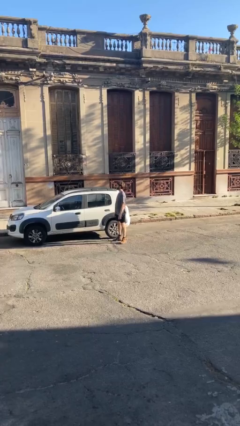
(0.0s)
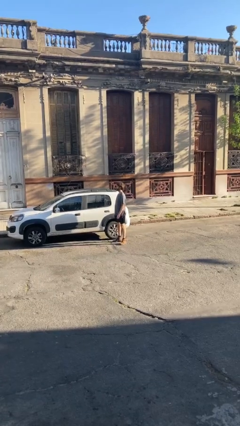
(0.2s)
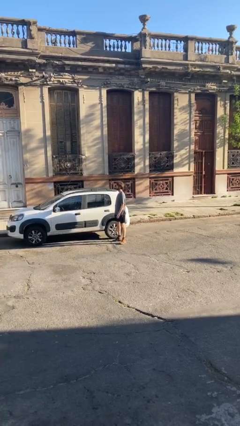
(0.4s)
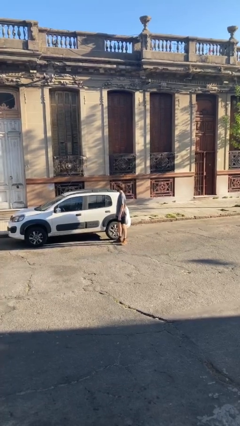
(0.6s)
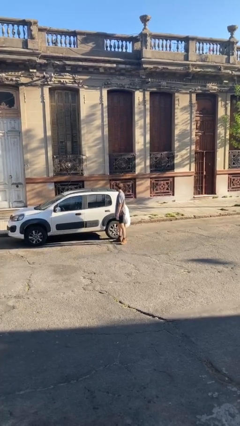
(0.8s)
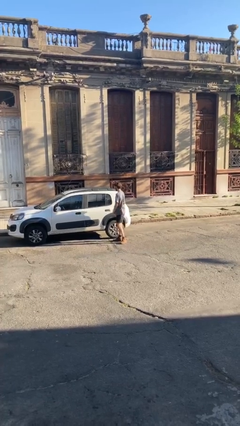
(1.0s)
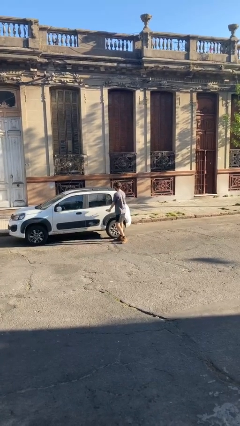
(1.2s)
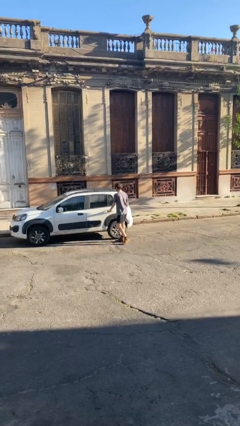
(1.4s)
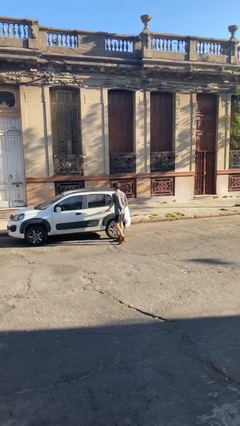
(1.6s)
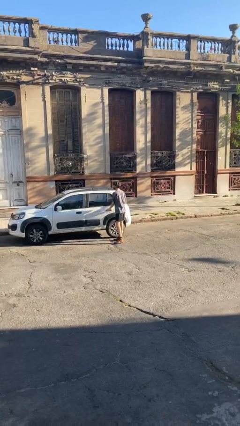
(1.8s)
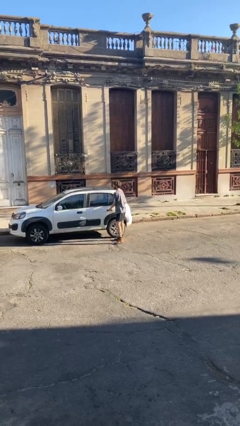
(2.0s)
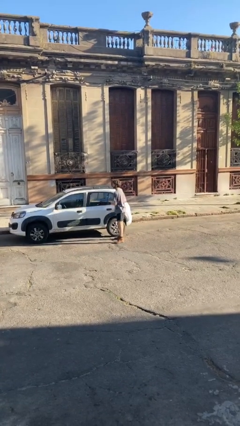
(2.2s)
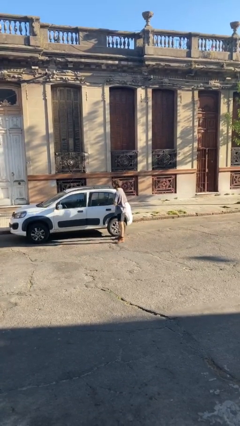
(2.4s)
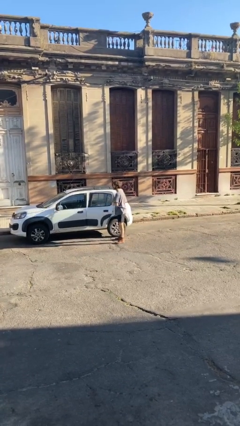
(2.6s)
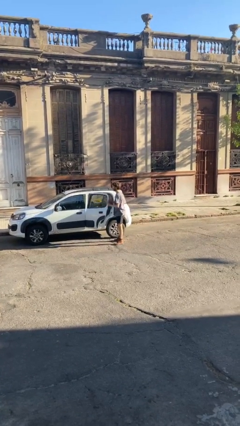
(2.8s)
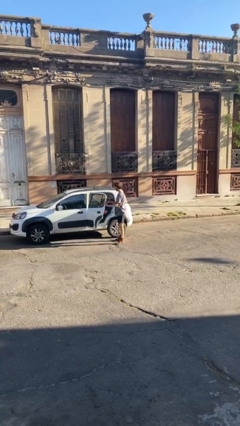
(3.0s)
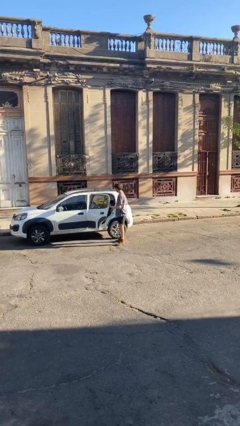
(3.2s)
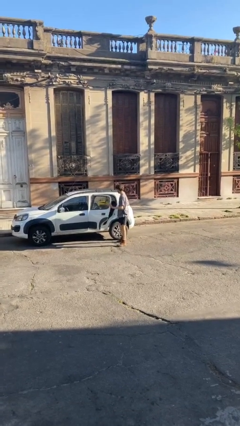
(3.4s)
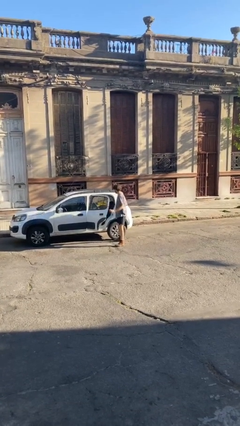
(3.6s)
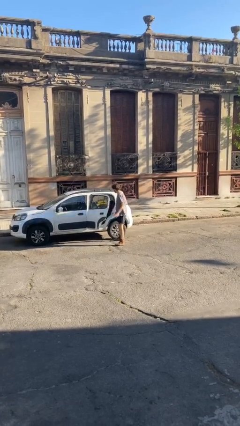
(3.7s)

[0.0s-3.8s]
person opens car door

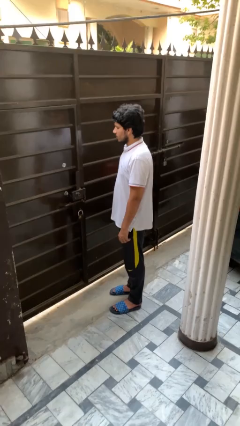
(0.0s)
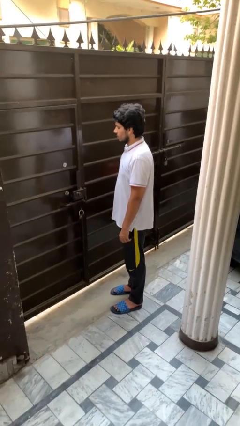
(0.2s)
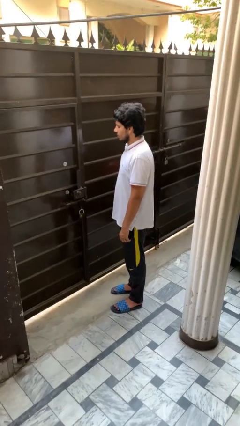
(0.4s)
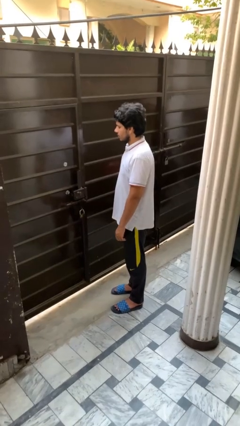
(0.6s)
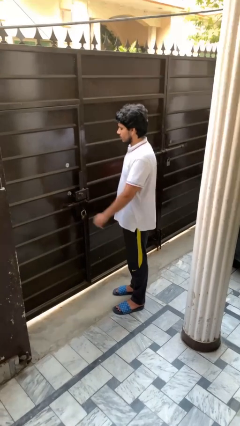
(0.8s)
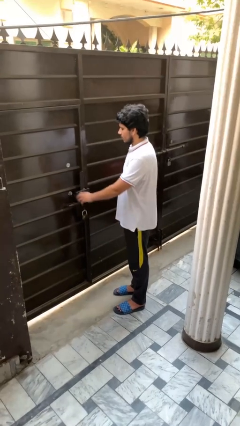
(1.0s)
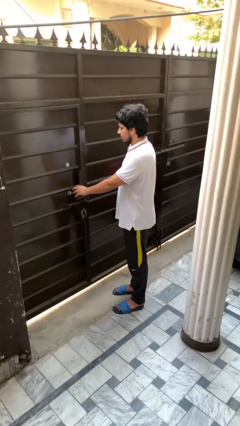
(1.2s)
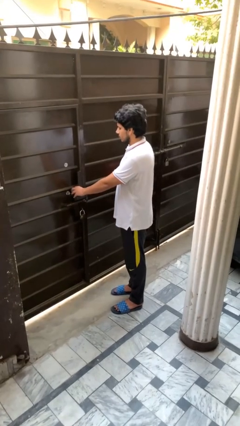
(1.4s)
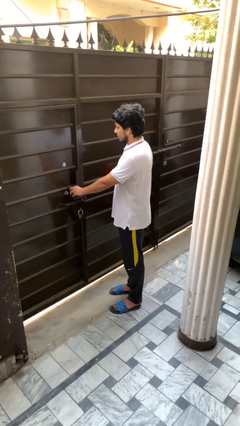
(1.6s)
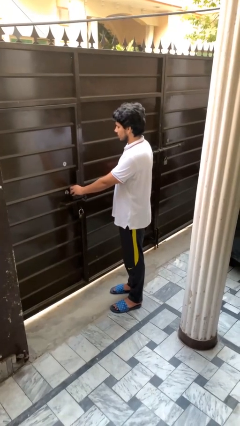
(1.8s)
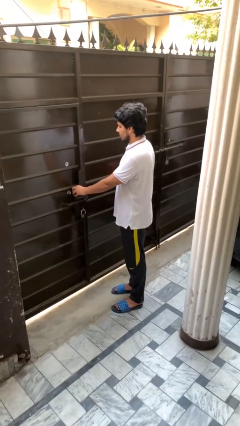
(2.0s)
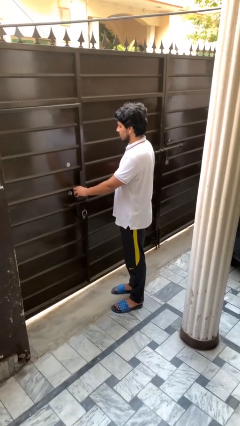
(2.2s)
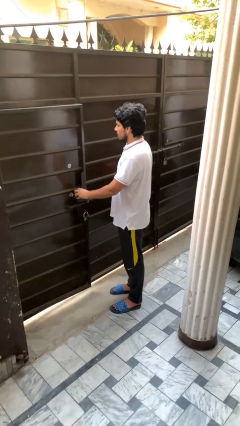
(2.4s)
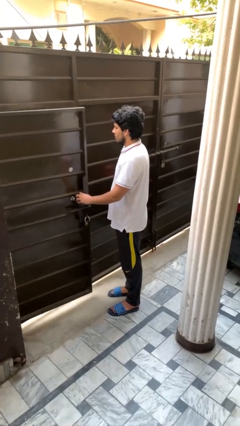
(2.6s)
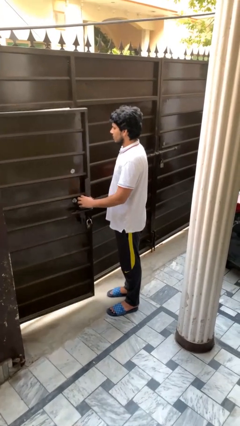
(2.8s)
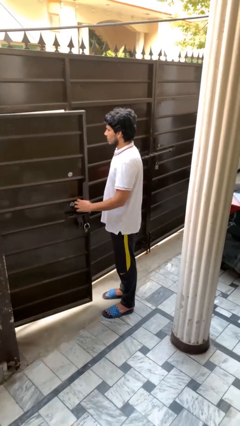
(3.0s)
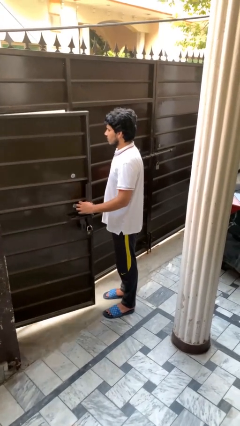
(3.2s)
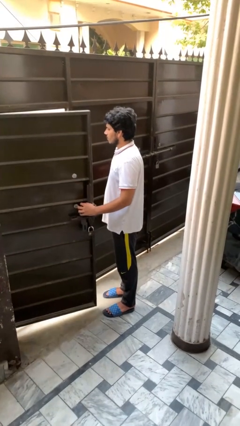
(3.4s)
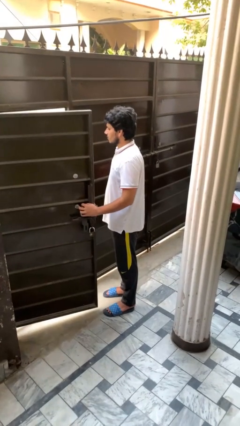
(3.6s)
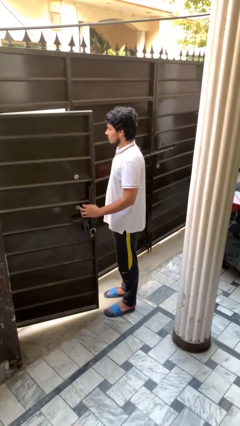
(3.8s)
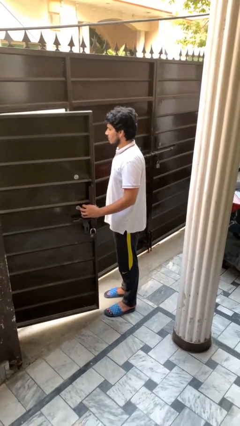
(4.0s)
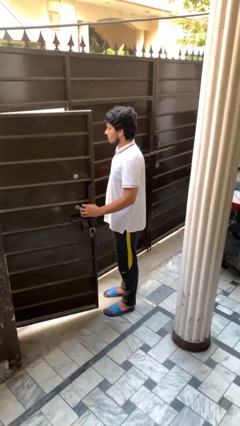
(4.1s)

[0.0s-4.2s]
person opens gate

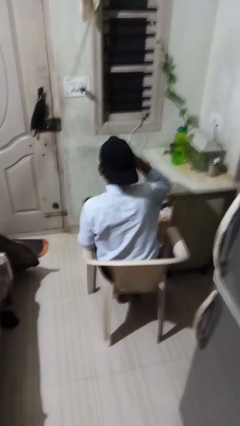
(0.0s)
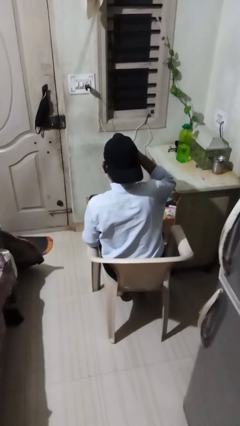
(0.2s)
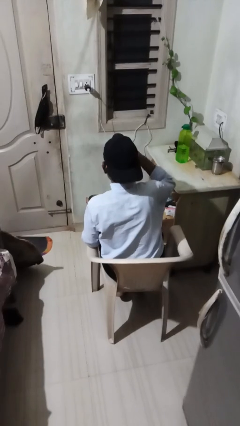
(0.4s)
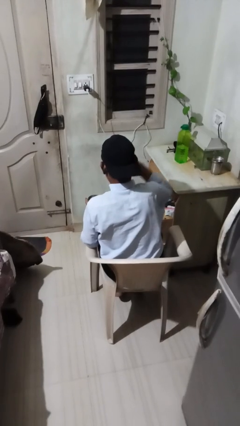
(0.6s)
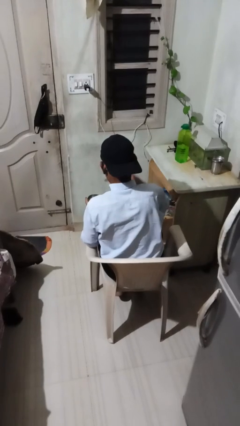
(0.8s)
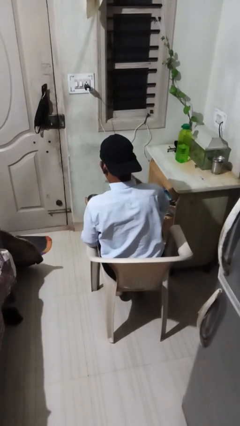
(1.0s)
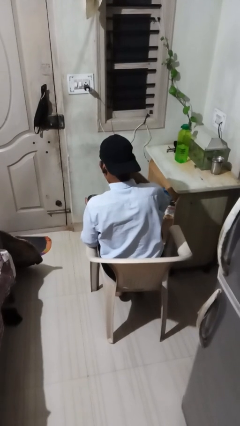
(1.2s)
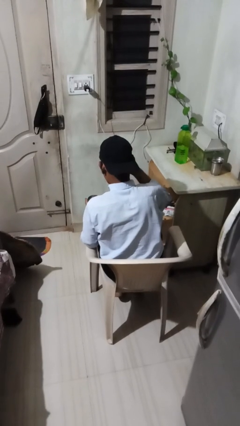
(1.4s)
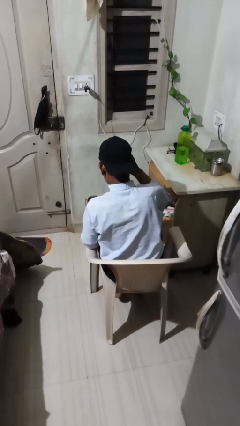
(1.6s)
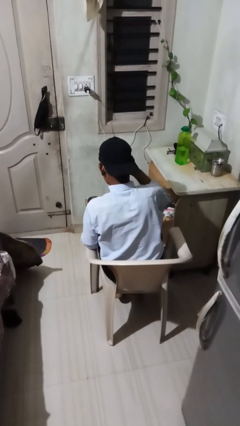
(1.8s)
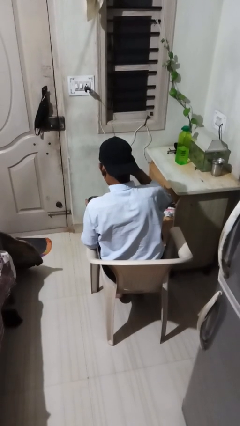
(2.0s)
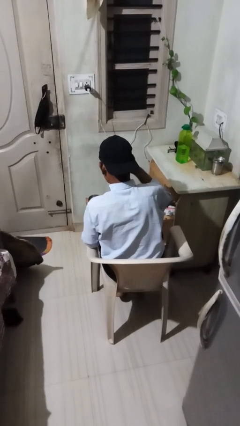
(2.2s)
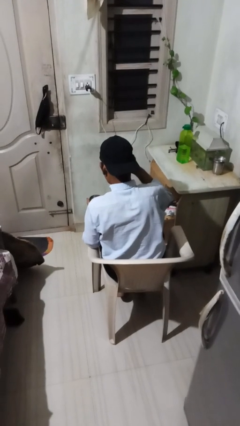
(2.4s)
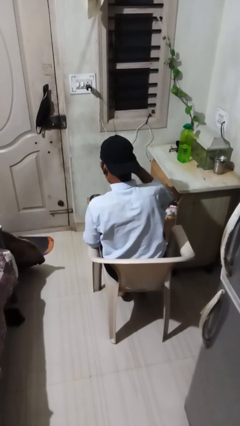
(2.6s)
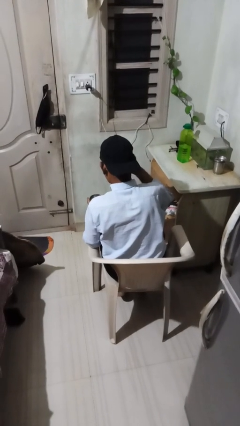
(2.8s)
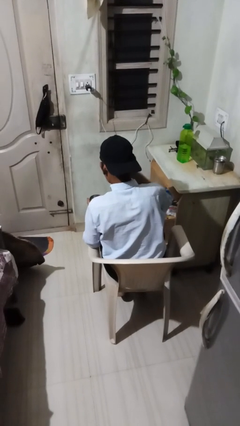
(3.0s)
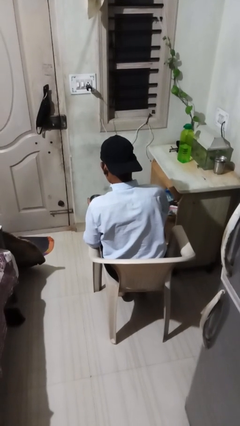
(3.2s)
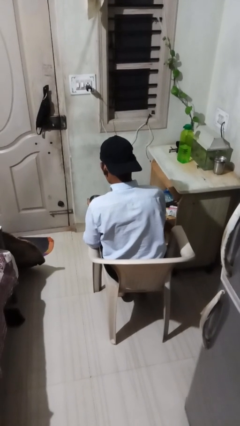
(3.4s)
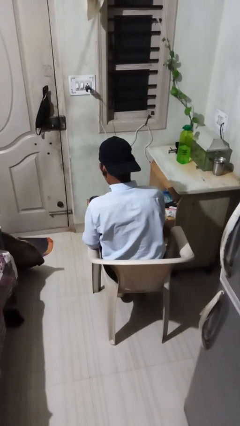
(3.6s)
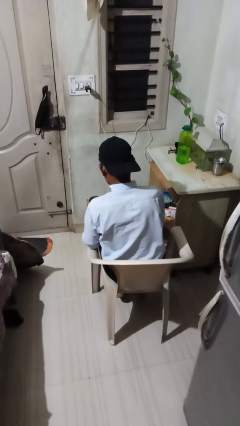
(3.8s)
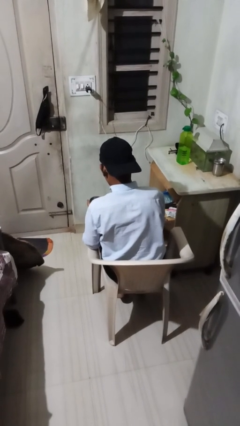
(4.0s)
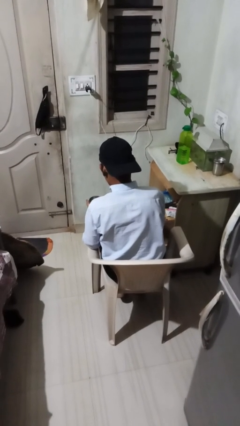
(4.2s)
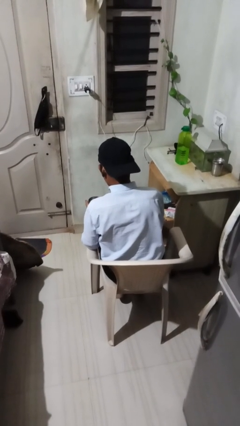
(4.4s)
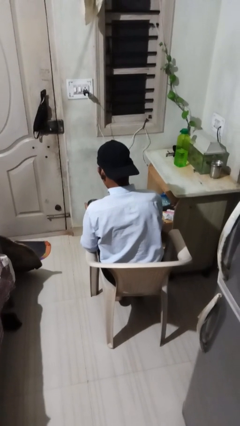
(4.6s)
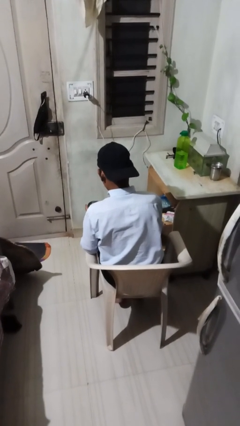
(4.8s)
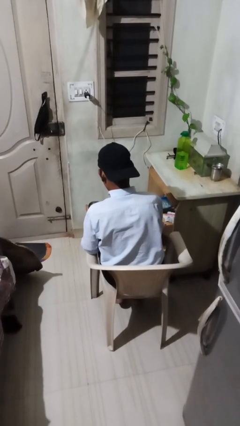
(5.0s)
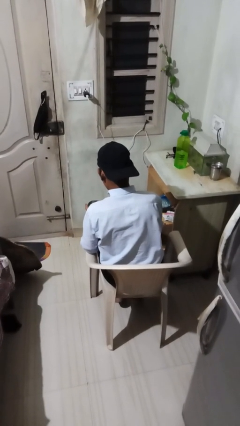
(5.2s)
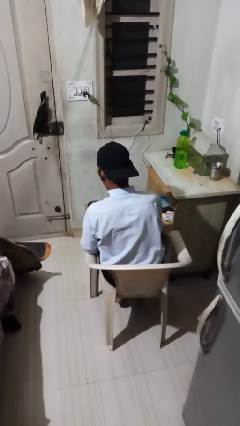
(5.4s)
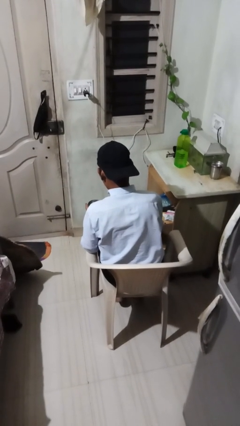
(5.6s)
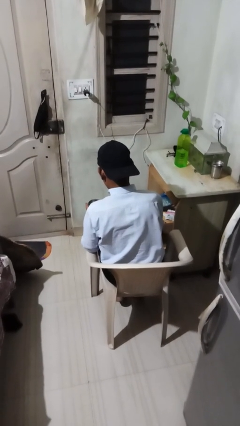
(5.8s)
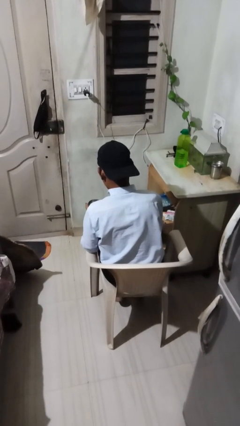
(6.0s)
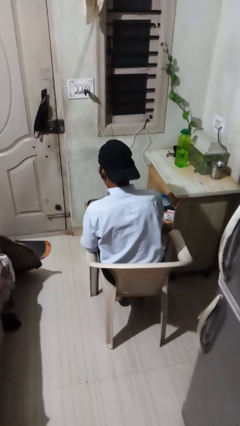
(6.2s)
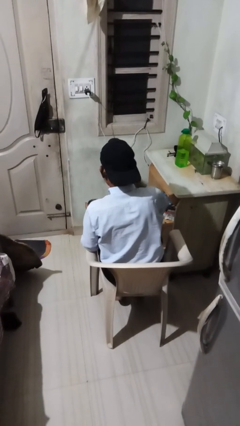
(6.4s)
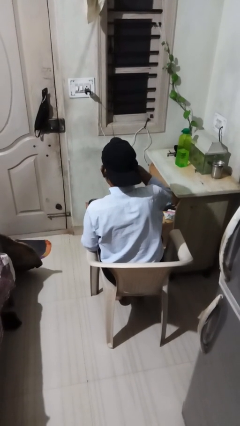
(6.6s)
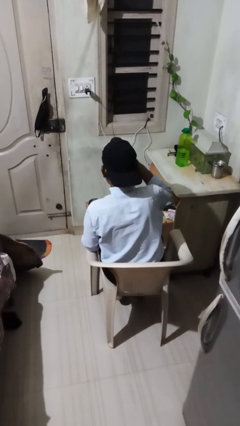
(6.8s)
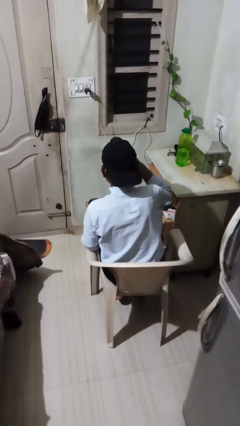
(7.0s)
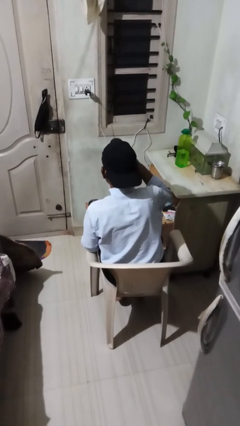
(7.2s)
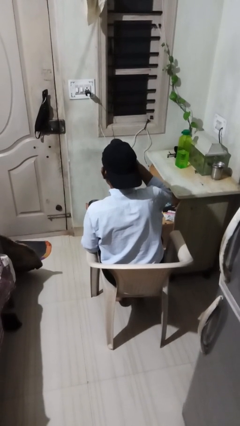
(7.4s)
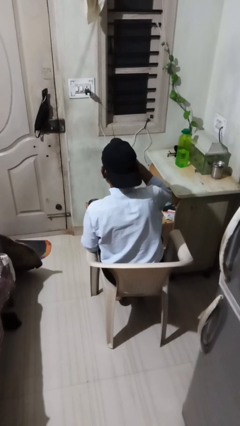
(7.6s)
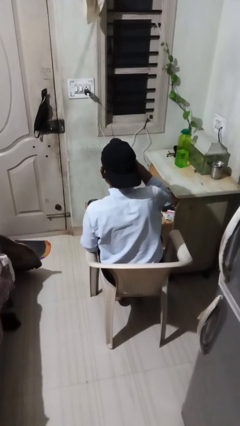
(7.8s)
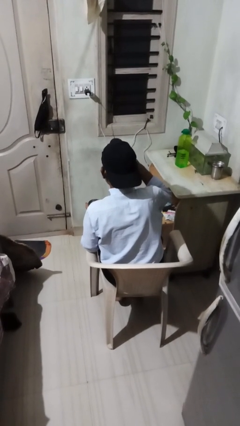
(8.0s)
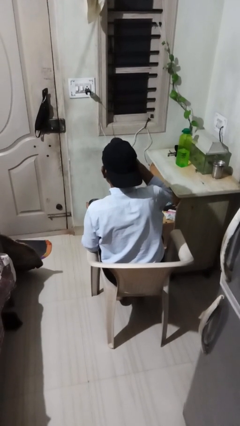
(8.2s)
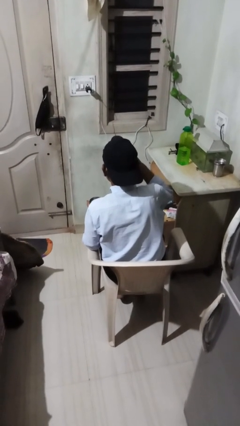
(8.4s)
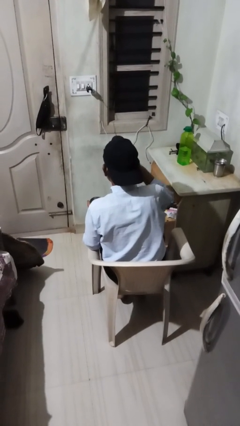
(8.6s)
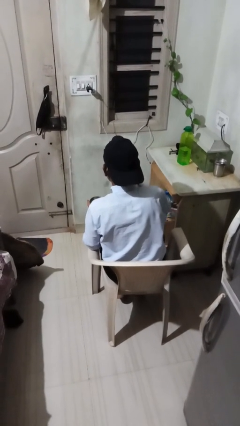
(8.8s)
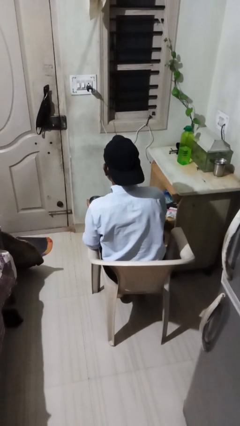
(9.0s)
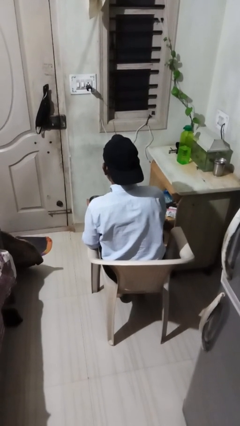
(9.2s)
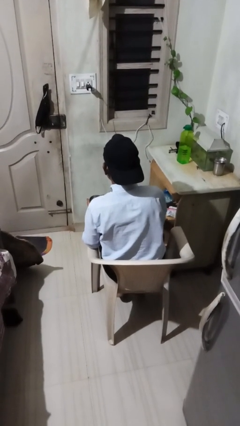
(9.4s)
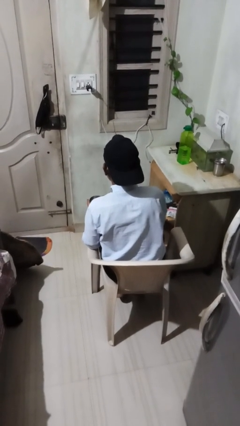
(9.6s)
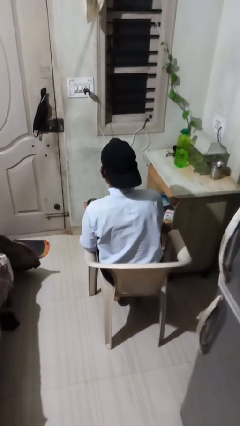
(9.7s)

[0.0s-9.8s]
person eats with utensil
